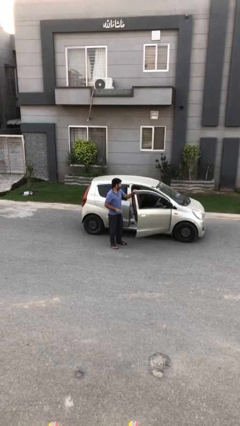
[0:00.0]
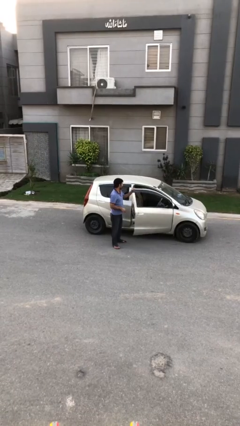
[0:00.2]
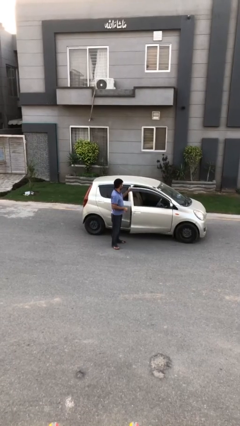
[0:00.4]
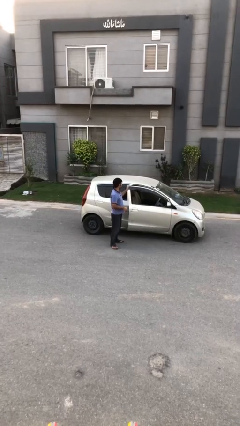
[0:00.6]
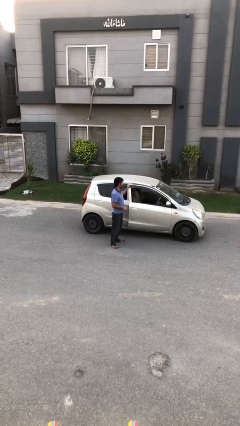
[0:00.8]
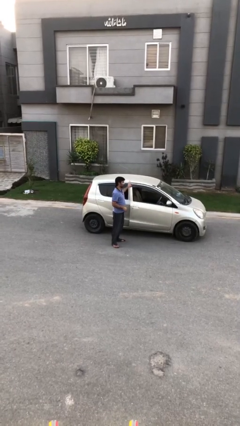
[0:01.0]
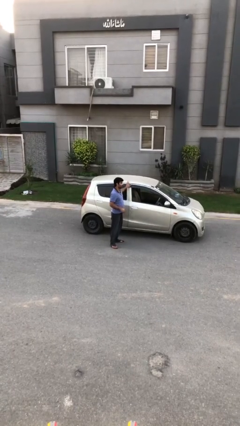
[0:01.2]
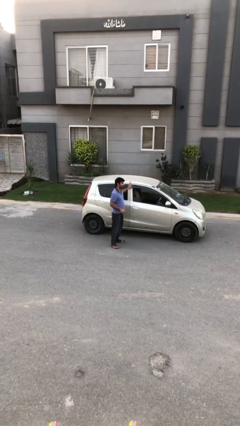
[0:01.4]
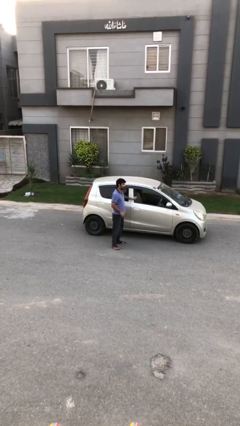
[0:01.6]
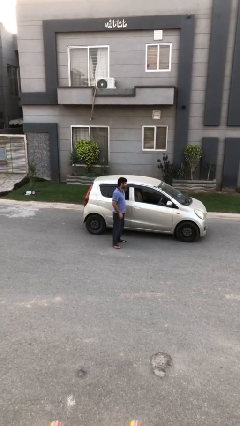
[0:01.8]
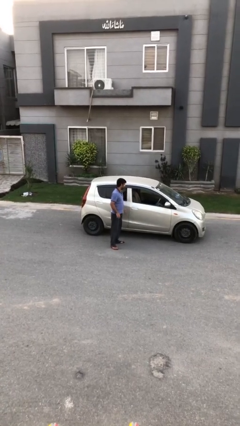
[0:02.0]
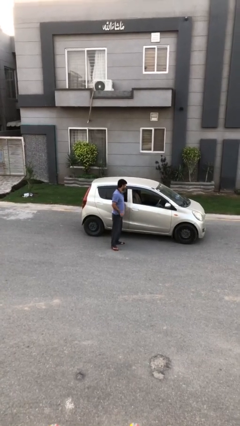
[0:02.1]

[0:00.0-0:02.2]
person closes car door

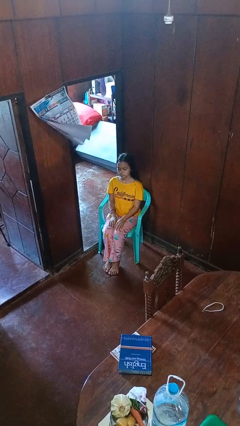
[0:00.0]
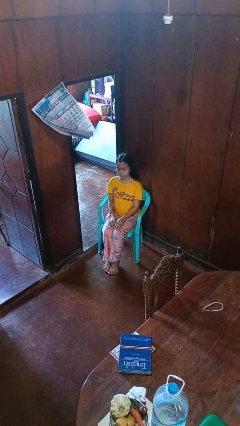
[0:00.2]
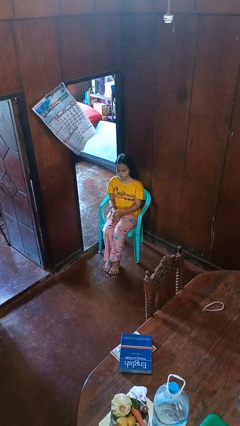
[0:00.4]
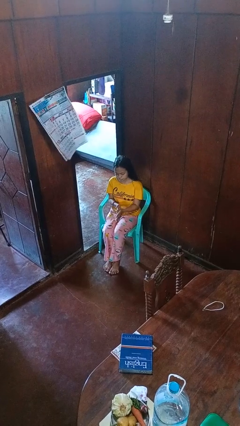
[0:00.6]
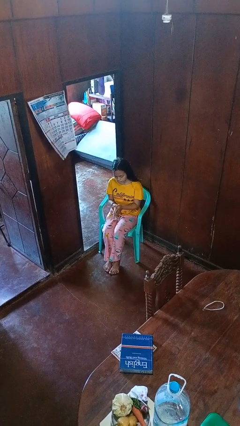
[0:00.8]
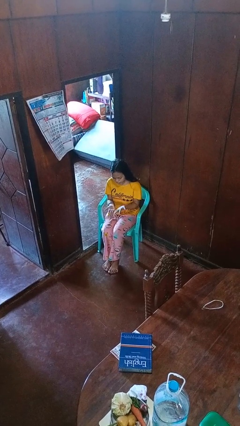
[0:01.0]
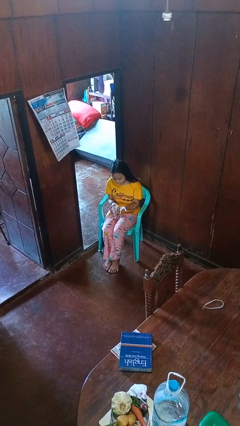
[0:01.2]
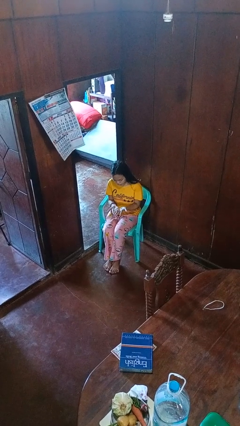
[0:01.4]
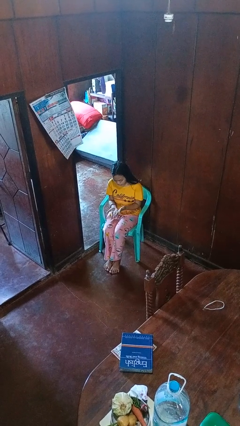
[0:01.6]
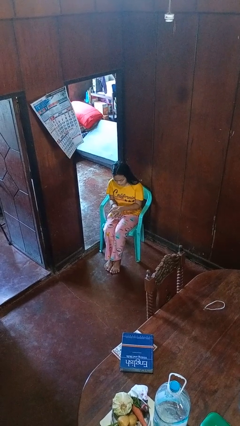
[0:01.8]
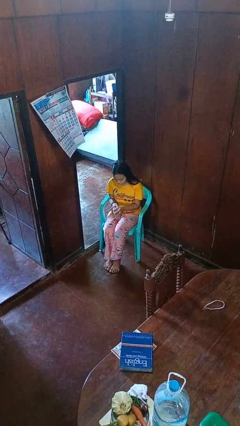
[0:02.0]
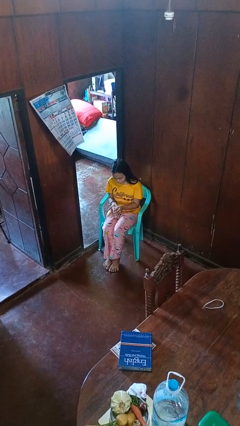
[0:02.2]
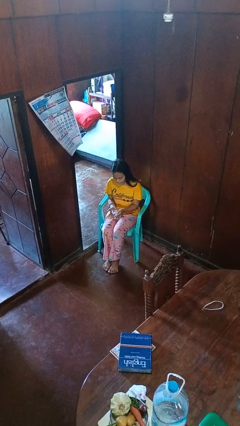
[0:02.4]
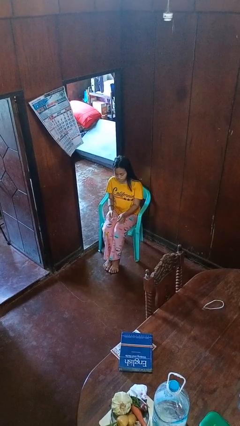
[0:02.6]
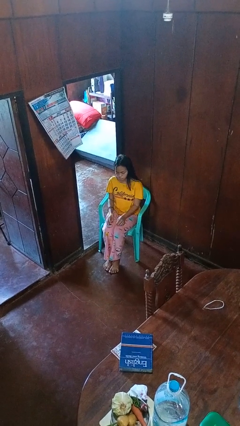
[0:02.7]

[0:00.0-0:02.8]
person looks at hands in lap

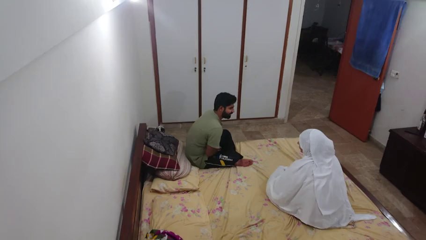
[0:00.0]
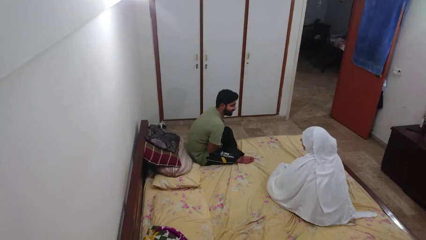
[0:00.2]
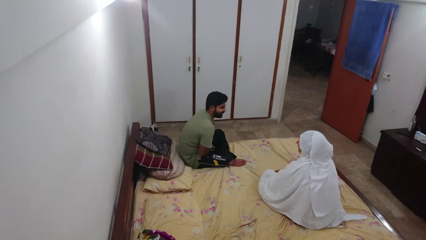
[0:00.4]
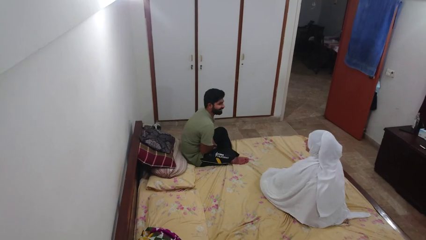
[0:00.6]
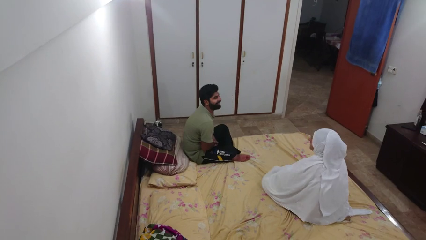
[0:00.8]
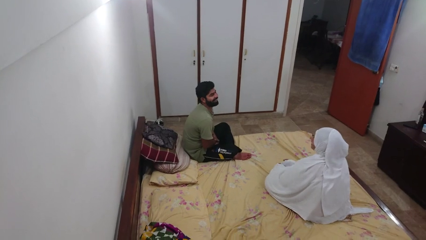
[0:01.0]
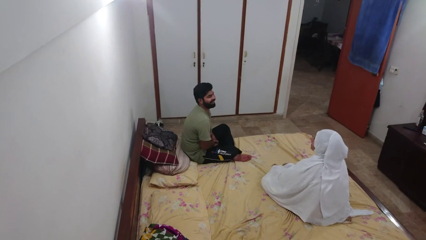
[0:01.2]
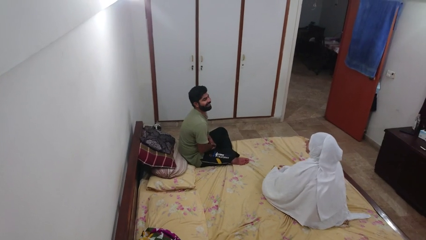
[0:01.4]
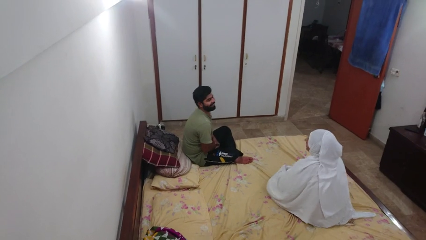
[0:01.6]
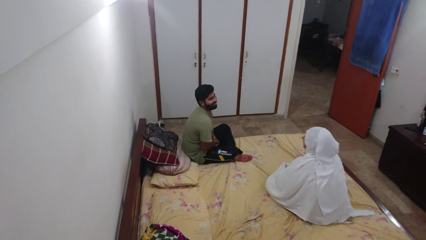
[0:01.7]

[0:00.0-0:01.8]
person laughs with person

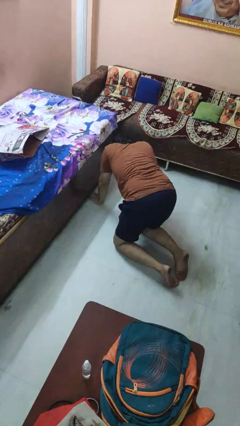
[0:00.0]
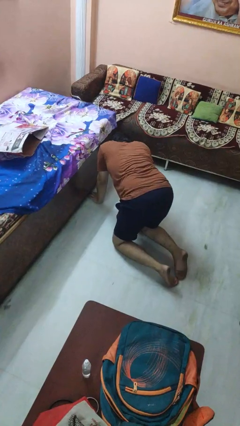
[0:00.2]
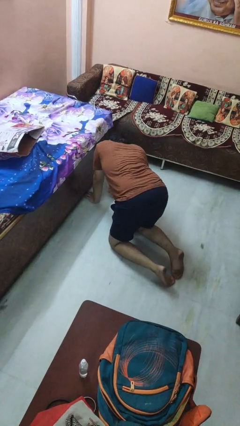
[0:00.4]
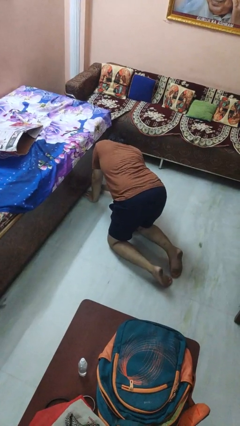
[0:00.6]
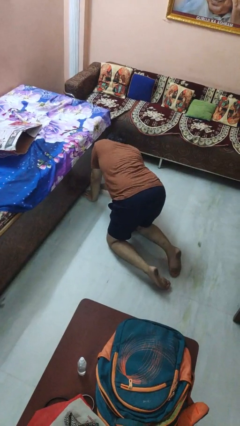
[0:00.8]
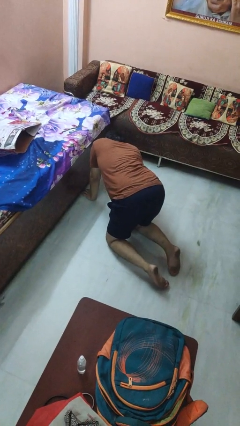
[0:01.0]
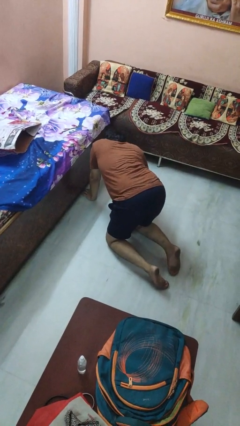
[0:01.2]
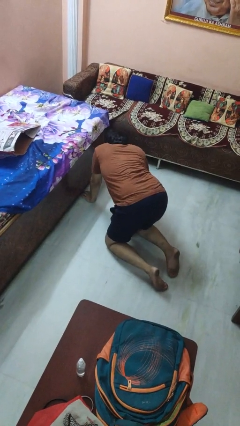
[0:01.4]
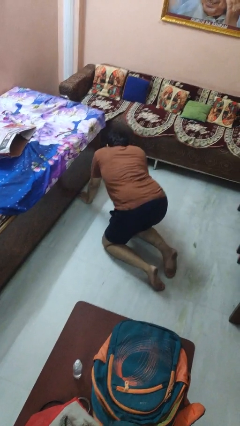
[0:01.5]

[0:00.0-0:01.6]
person searches under bed

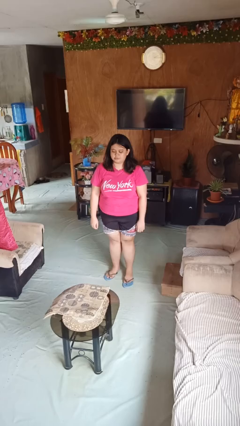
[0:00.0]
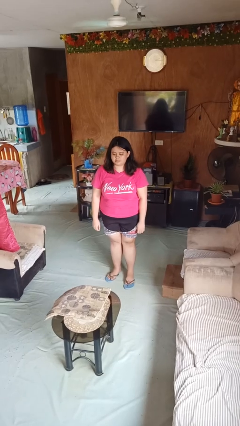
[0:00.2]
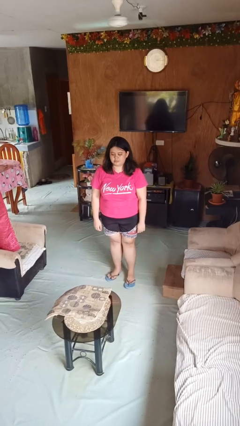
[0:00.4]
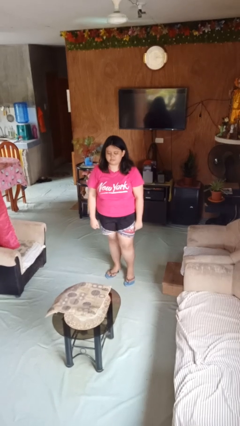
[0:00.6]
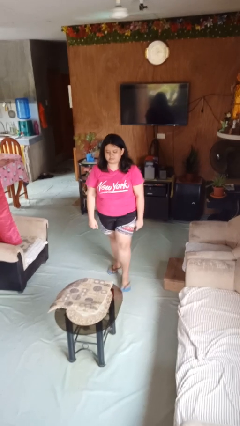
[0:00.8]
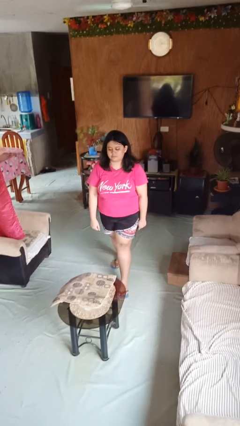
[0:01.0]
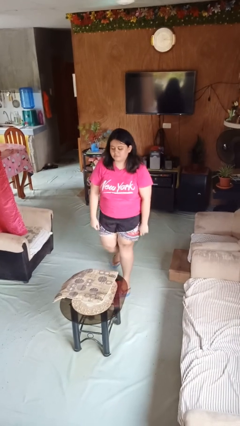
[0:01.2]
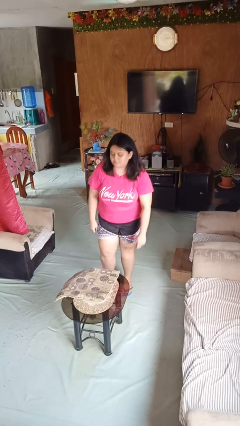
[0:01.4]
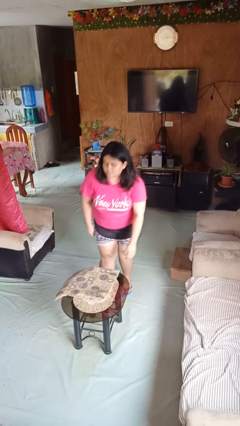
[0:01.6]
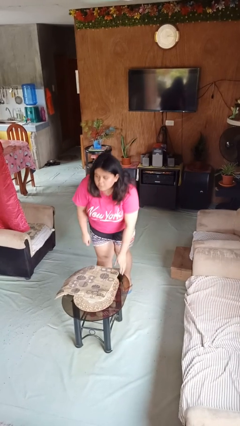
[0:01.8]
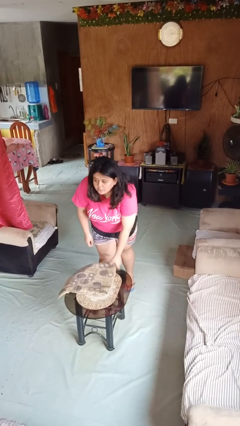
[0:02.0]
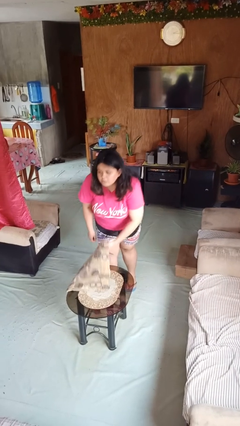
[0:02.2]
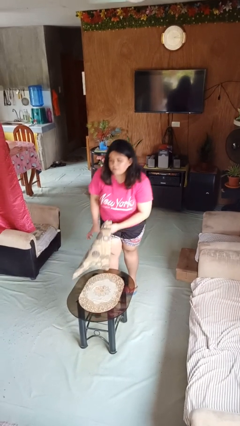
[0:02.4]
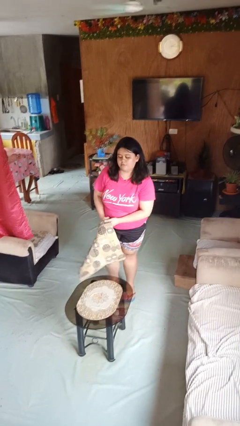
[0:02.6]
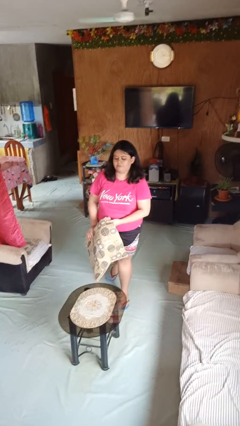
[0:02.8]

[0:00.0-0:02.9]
person picks up object from table

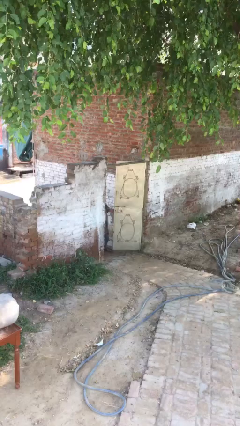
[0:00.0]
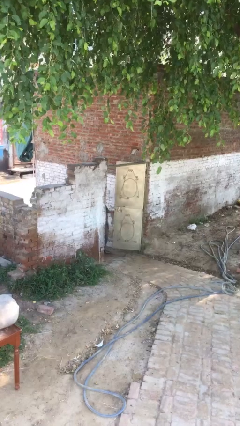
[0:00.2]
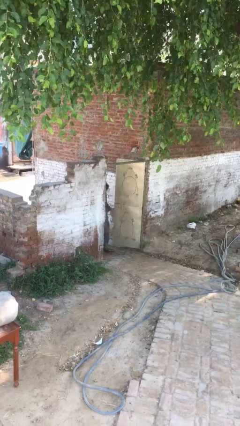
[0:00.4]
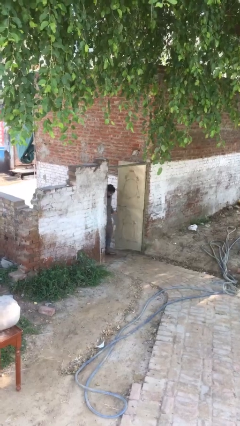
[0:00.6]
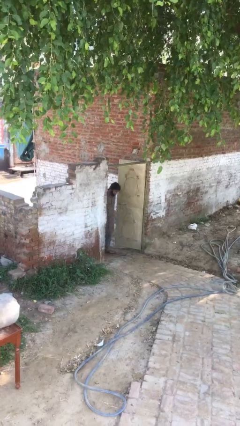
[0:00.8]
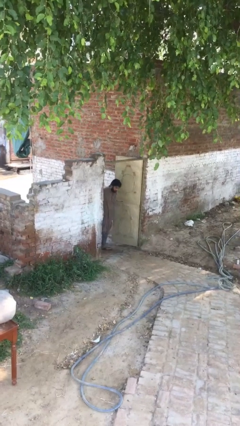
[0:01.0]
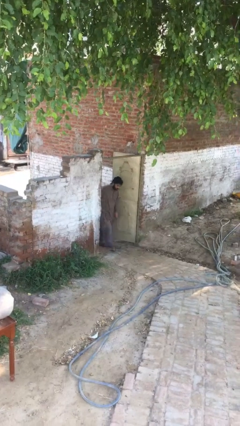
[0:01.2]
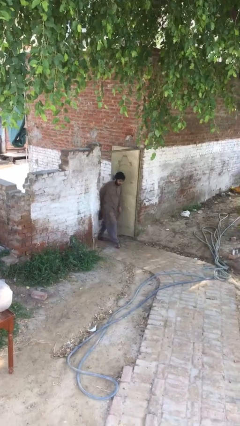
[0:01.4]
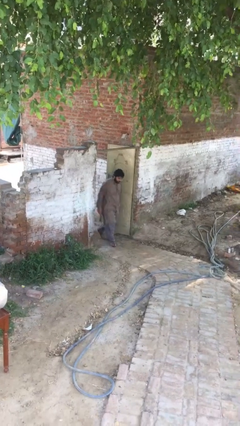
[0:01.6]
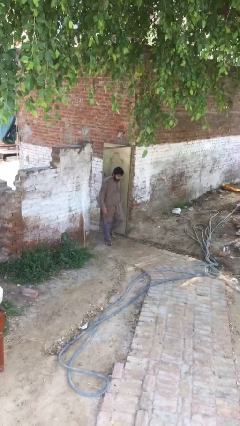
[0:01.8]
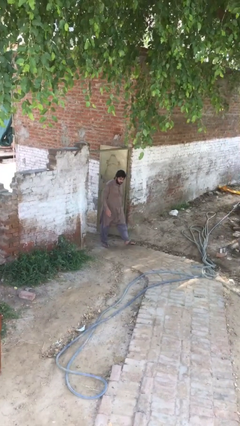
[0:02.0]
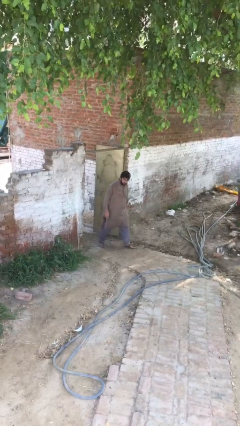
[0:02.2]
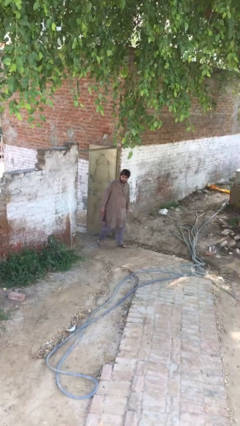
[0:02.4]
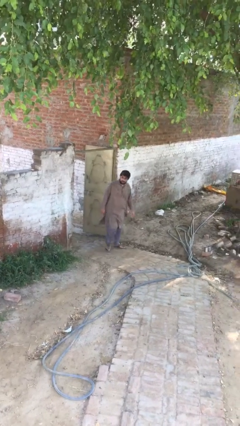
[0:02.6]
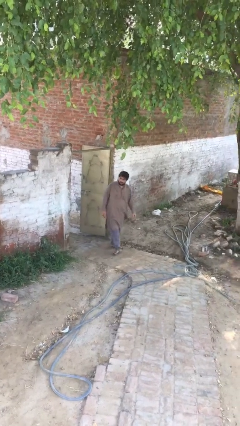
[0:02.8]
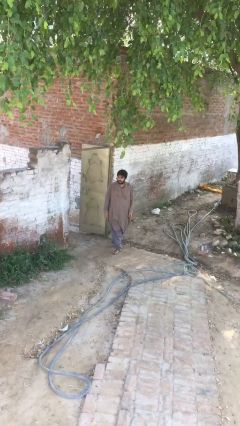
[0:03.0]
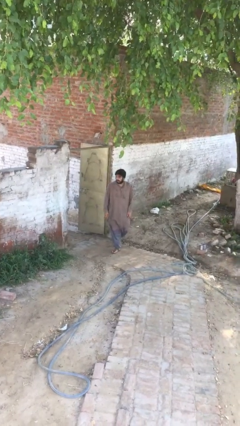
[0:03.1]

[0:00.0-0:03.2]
person enters scene through structure

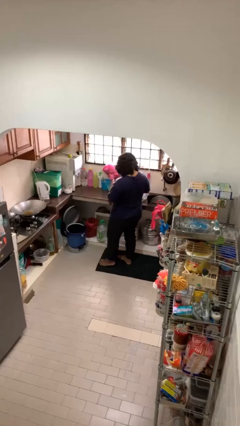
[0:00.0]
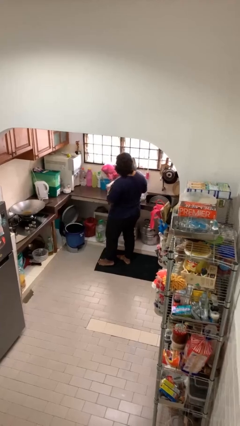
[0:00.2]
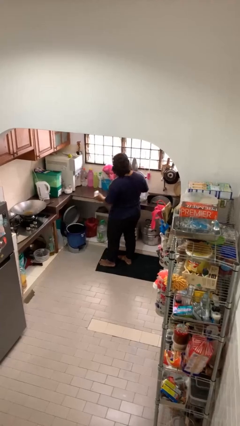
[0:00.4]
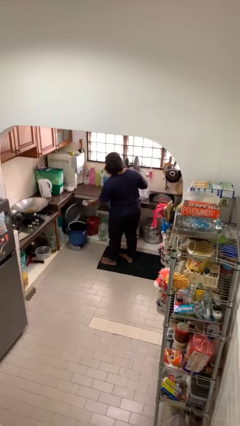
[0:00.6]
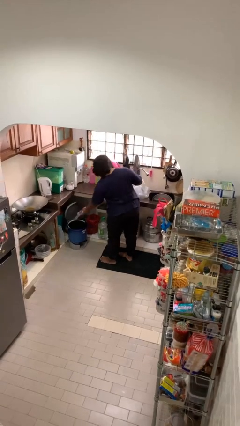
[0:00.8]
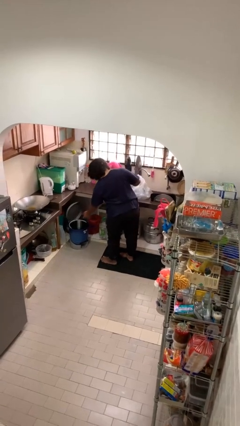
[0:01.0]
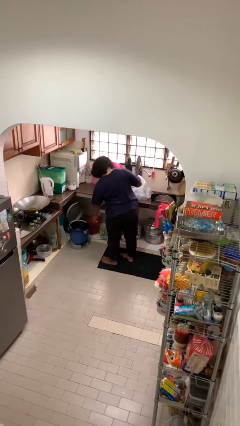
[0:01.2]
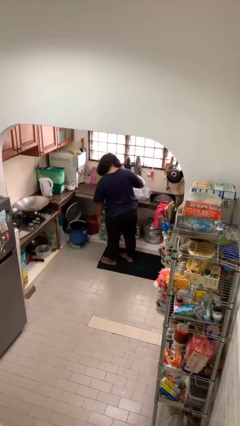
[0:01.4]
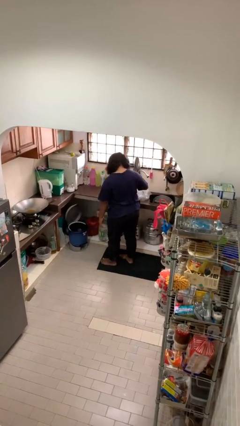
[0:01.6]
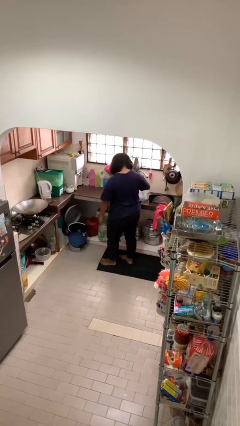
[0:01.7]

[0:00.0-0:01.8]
person discards trash

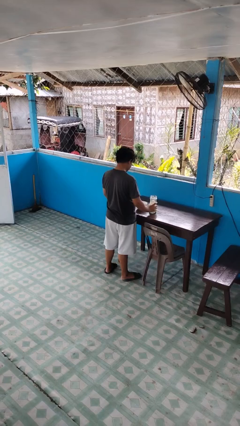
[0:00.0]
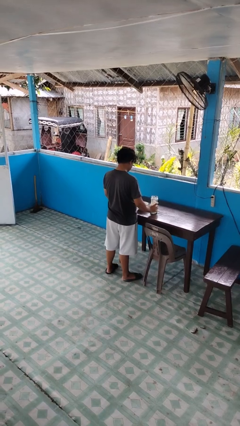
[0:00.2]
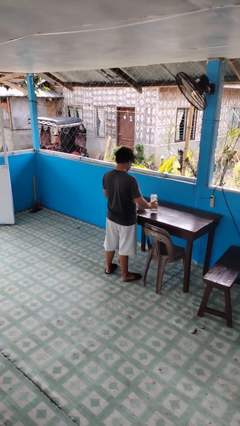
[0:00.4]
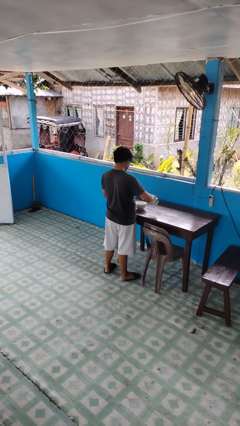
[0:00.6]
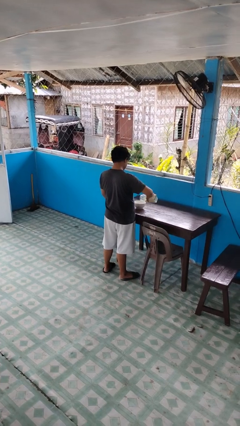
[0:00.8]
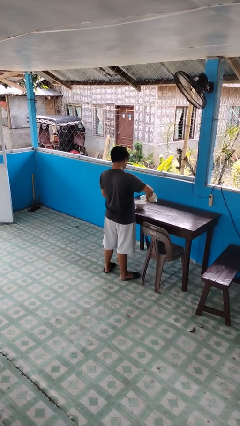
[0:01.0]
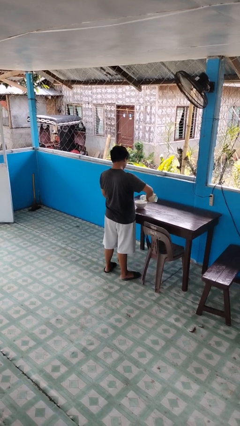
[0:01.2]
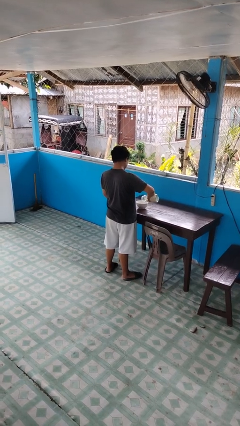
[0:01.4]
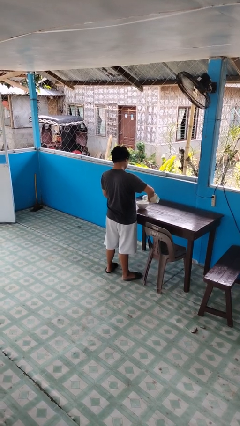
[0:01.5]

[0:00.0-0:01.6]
person pours into bowl
